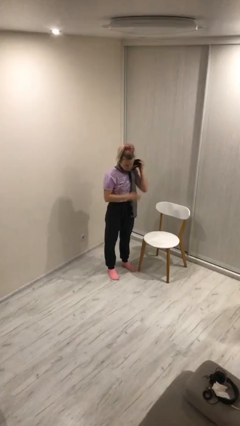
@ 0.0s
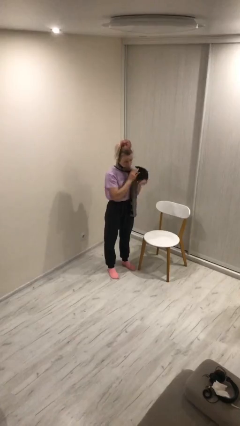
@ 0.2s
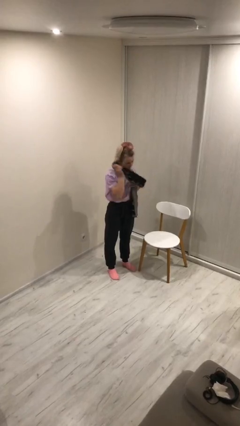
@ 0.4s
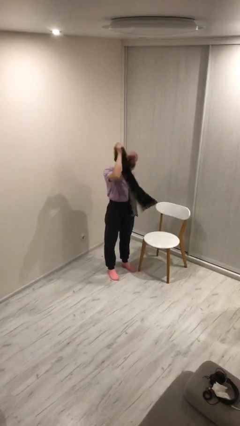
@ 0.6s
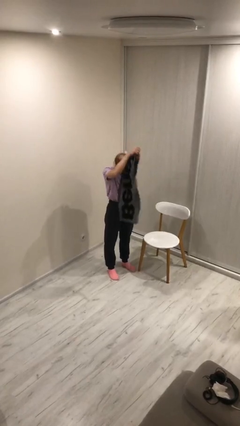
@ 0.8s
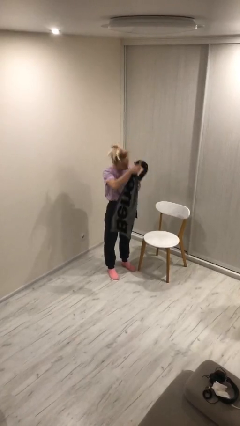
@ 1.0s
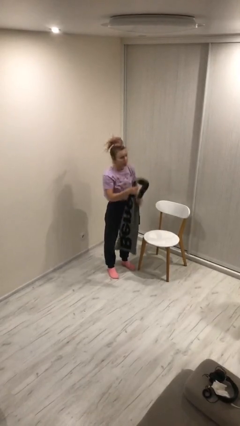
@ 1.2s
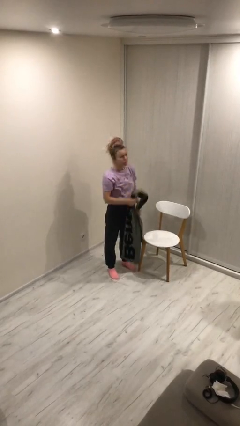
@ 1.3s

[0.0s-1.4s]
person takes off scarf

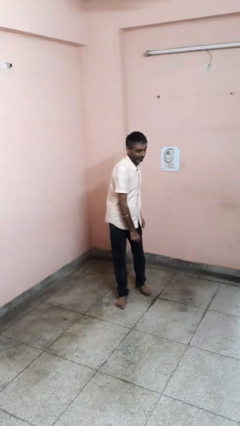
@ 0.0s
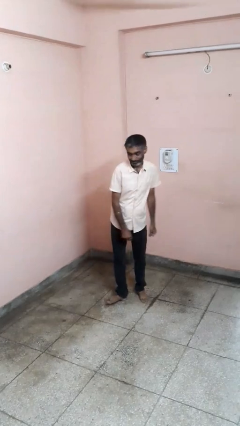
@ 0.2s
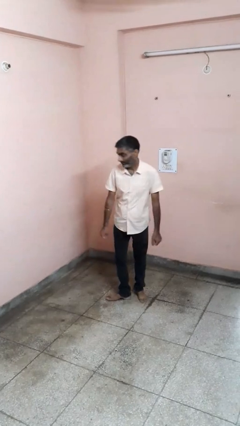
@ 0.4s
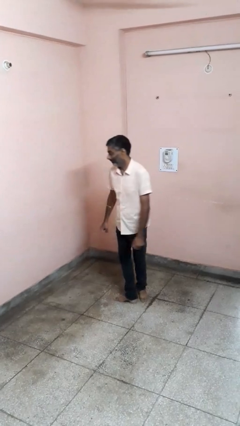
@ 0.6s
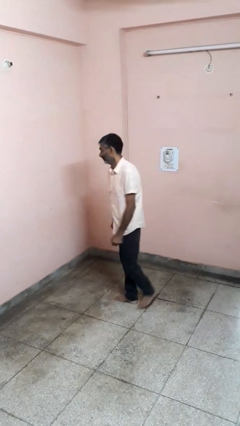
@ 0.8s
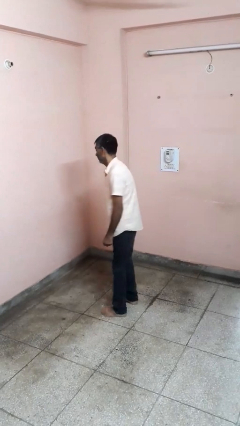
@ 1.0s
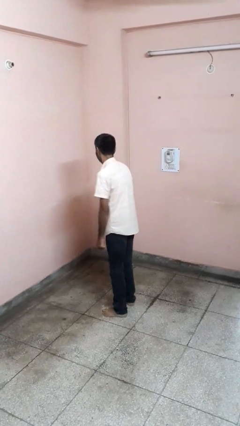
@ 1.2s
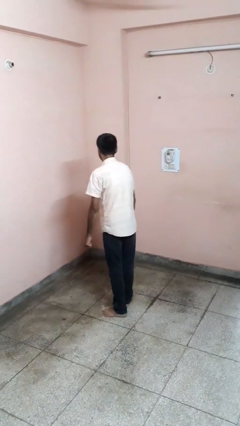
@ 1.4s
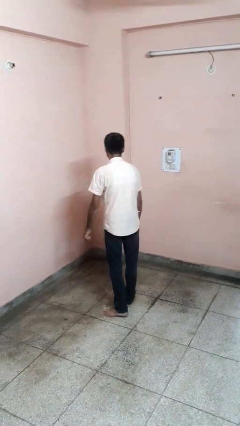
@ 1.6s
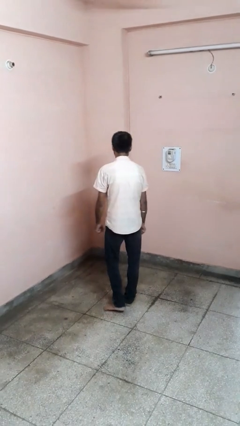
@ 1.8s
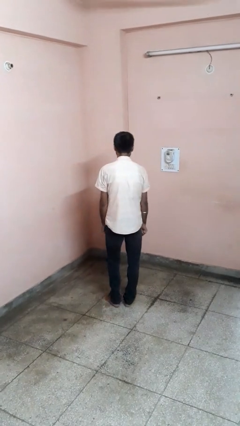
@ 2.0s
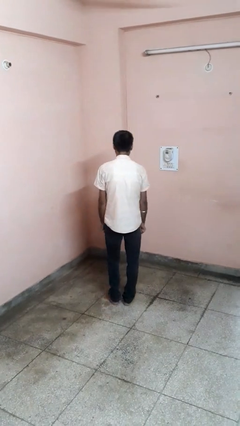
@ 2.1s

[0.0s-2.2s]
person twirls

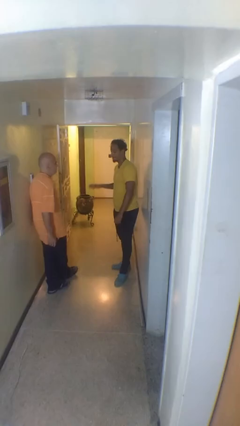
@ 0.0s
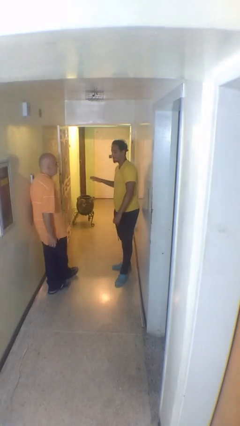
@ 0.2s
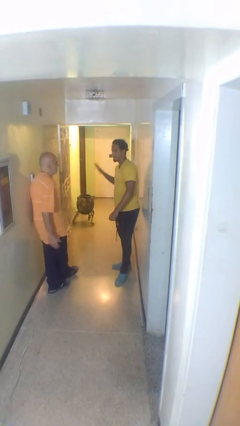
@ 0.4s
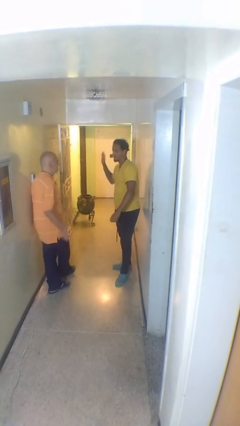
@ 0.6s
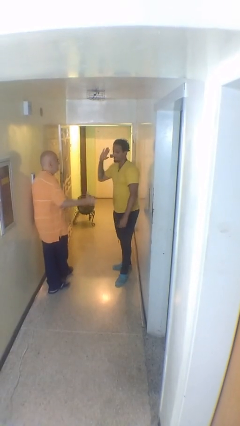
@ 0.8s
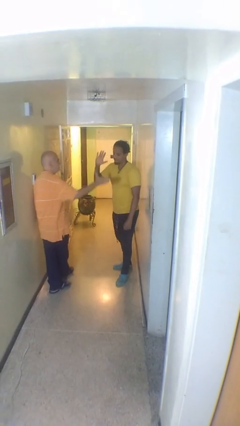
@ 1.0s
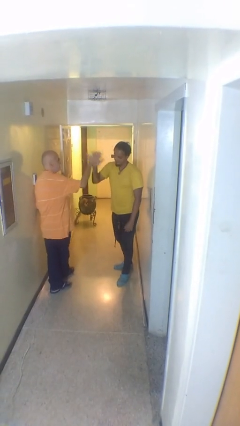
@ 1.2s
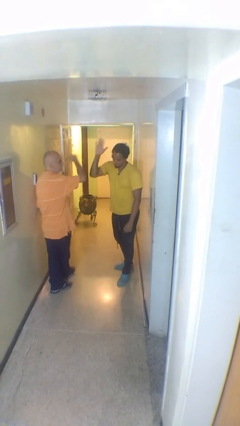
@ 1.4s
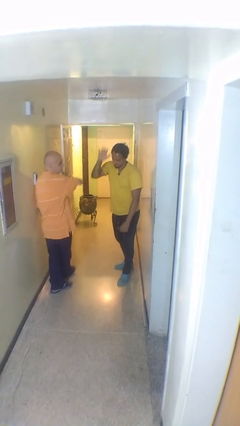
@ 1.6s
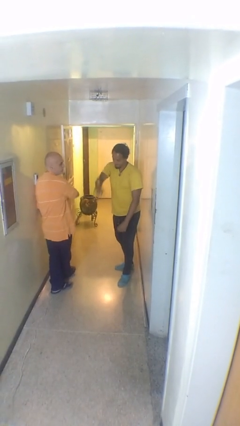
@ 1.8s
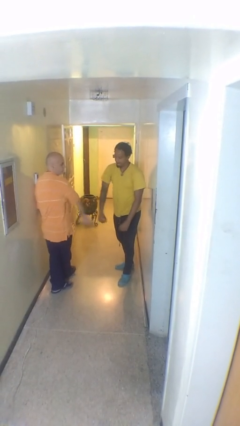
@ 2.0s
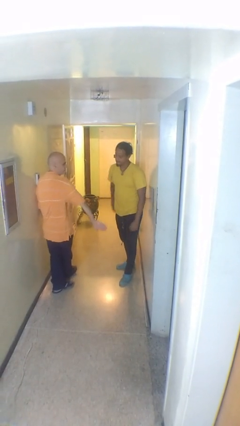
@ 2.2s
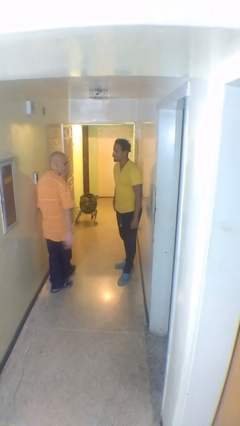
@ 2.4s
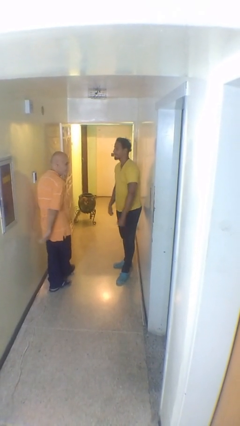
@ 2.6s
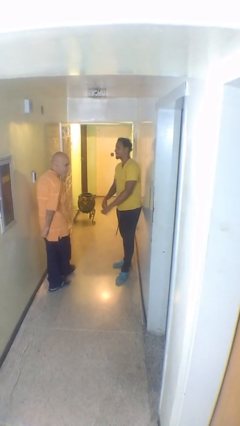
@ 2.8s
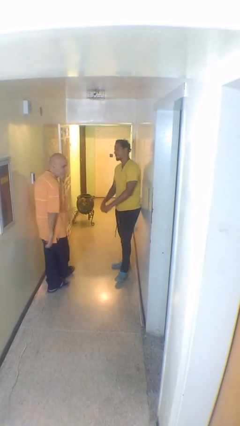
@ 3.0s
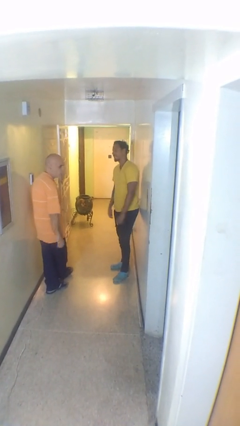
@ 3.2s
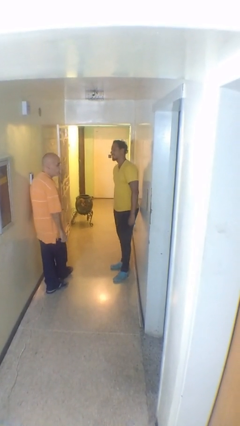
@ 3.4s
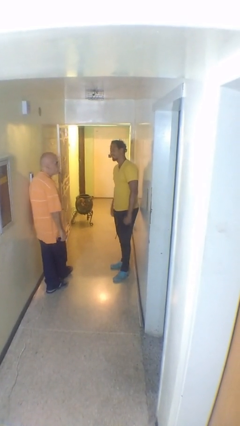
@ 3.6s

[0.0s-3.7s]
person highfives hand

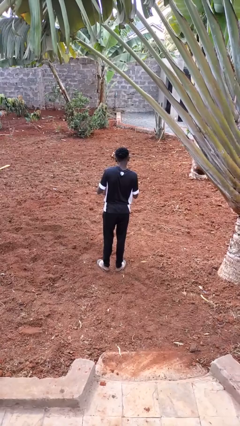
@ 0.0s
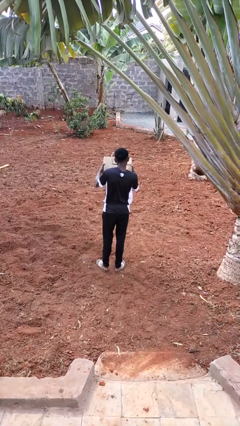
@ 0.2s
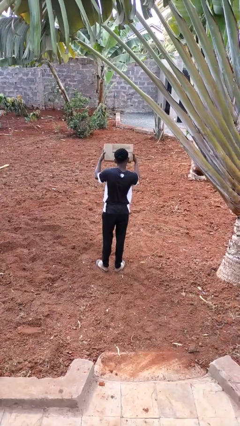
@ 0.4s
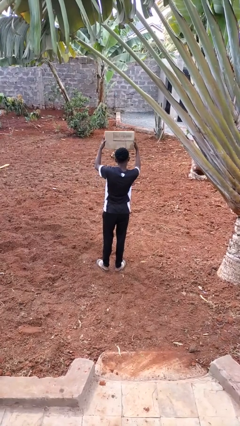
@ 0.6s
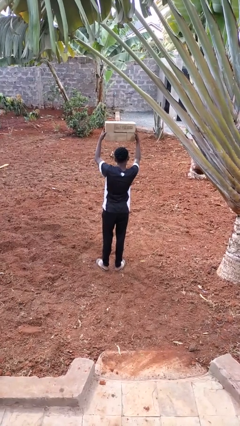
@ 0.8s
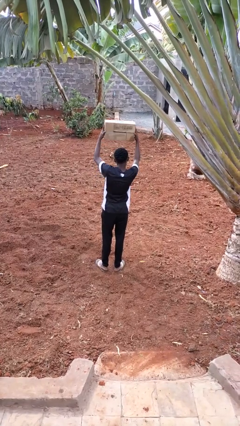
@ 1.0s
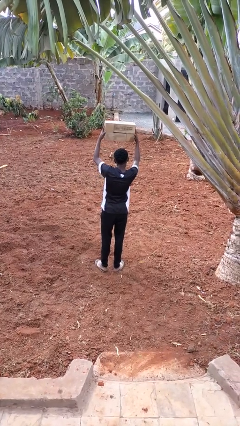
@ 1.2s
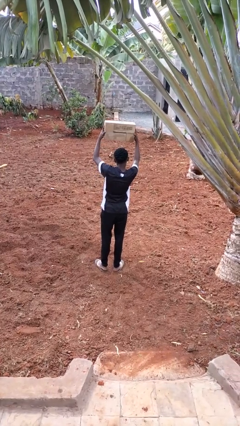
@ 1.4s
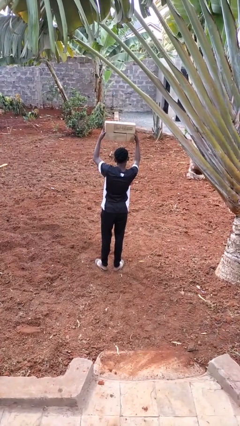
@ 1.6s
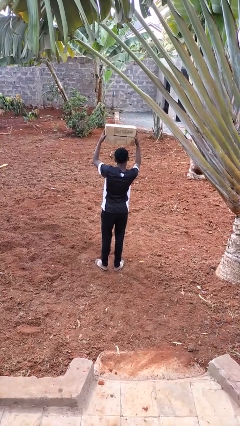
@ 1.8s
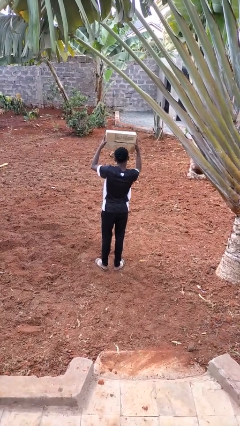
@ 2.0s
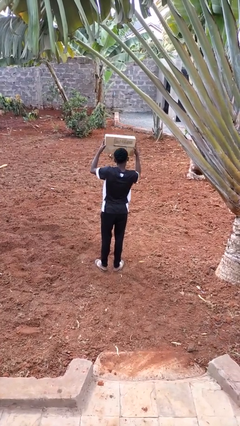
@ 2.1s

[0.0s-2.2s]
person holds object above head

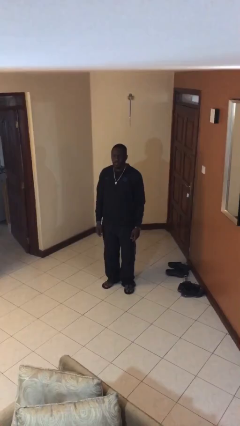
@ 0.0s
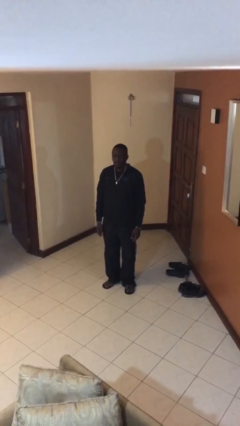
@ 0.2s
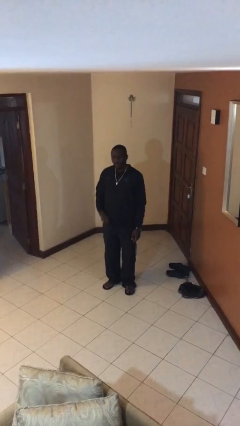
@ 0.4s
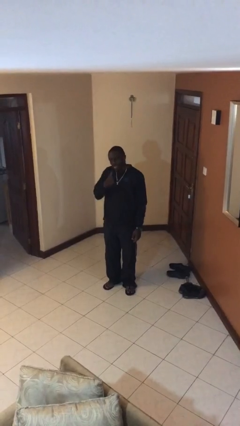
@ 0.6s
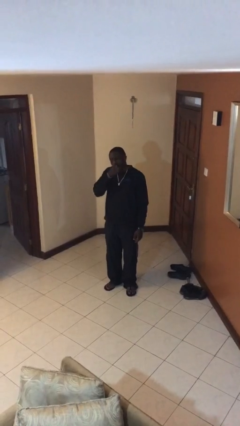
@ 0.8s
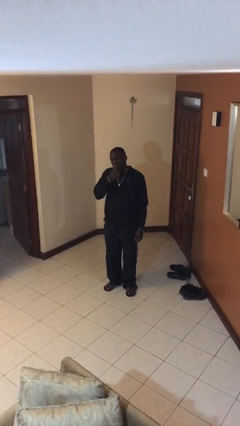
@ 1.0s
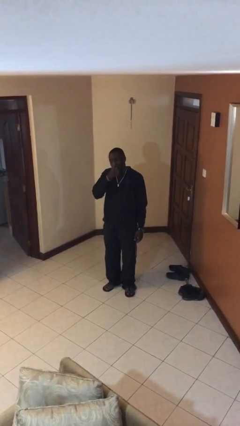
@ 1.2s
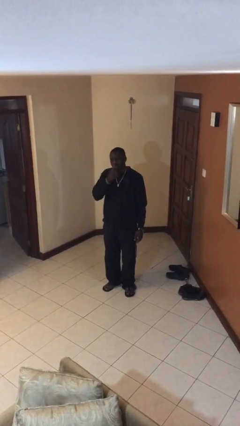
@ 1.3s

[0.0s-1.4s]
person licks fingers

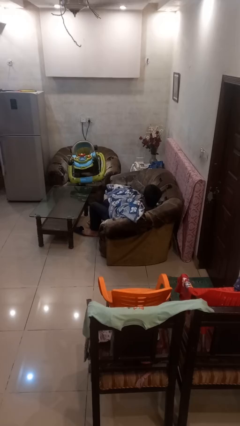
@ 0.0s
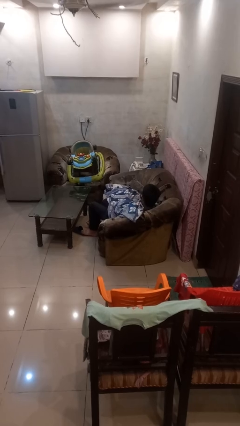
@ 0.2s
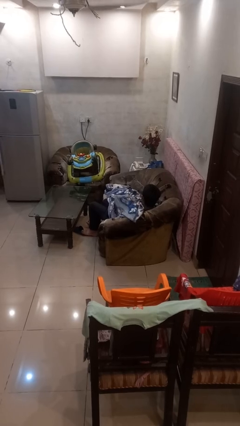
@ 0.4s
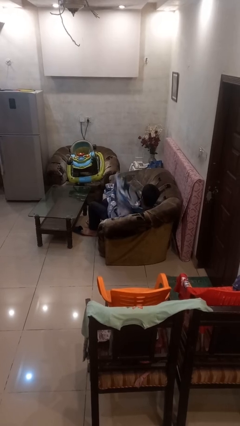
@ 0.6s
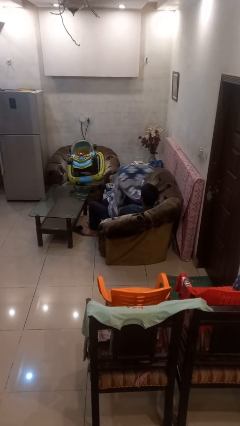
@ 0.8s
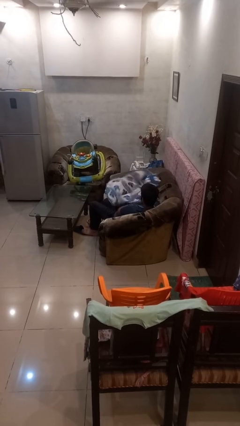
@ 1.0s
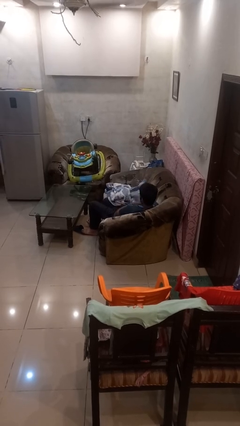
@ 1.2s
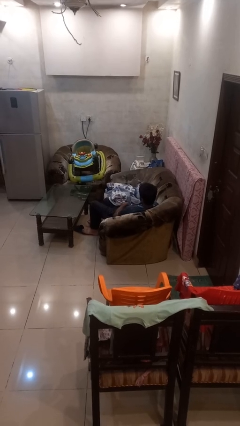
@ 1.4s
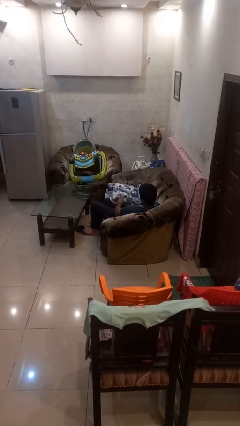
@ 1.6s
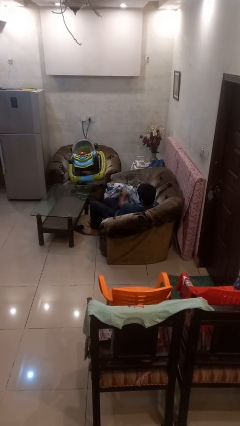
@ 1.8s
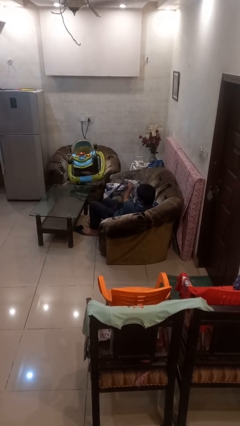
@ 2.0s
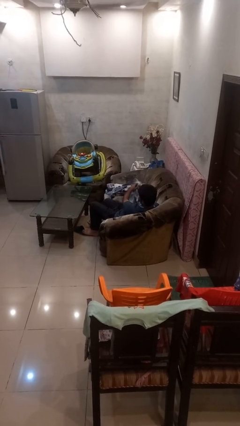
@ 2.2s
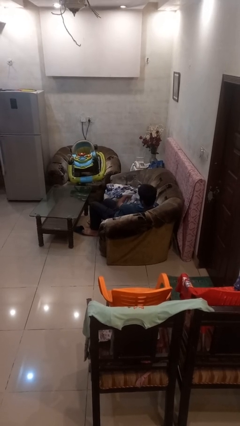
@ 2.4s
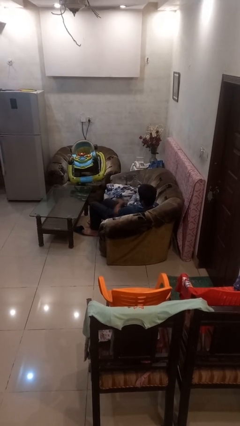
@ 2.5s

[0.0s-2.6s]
person uncovers with blanket

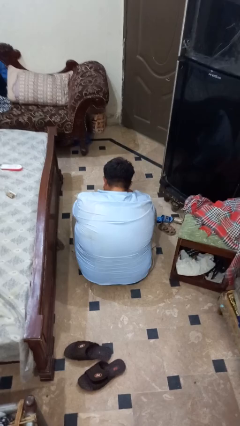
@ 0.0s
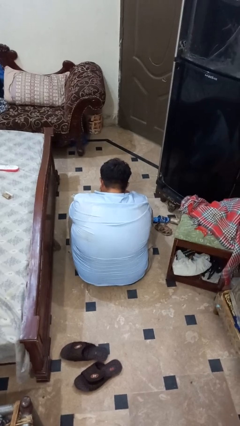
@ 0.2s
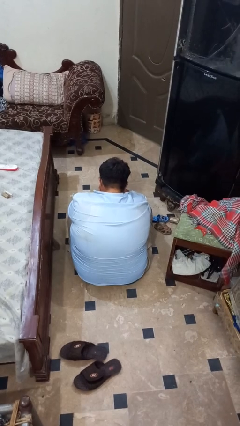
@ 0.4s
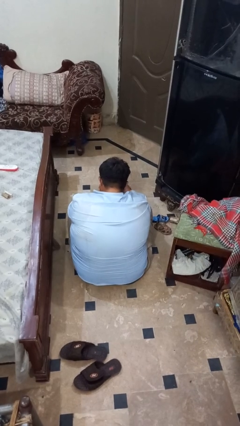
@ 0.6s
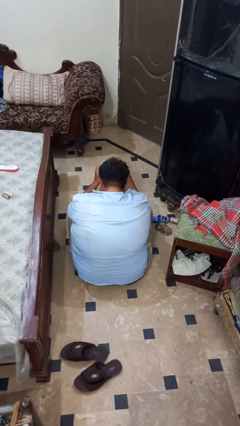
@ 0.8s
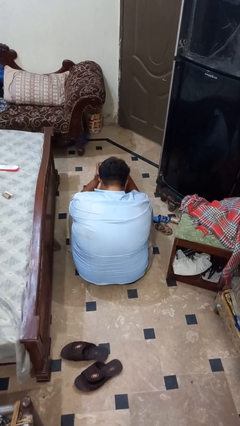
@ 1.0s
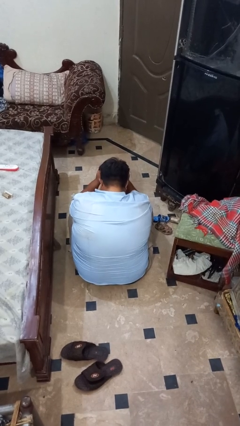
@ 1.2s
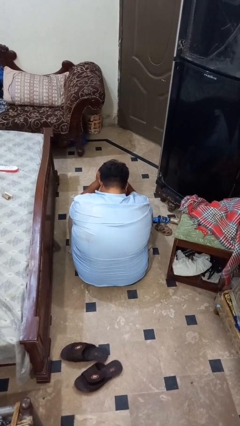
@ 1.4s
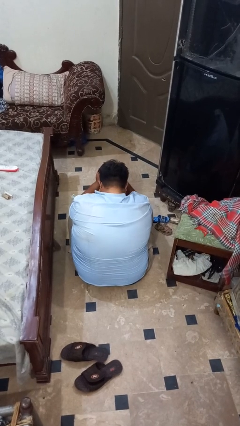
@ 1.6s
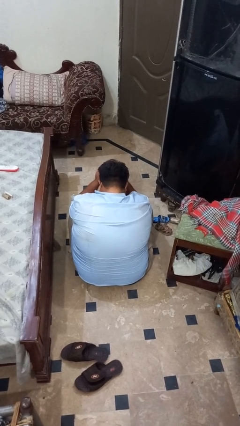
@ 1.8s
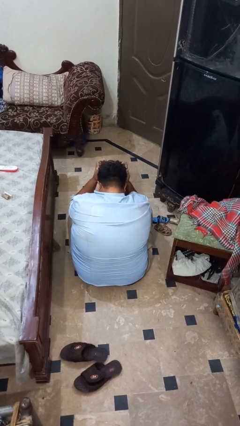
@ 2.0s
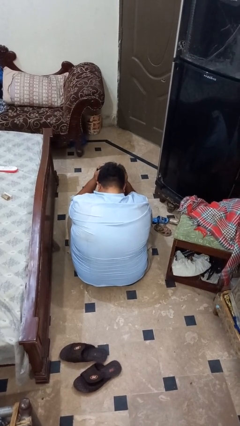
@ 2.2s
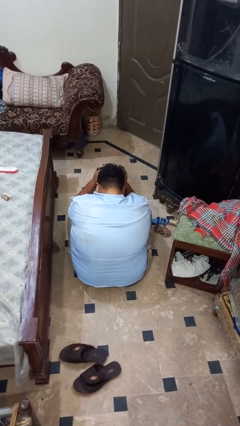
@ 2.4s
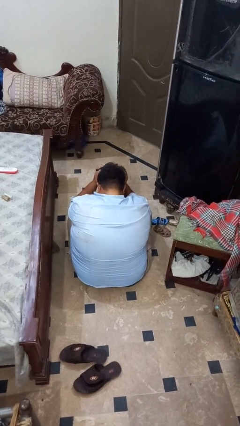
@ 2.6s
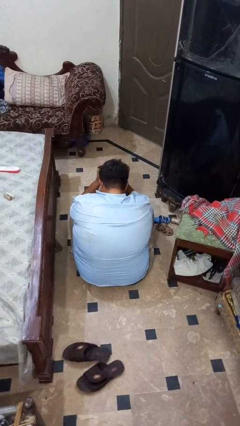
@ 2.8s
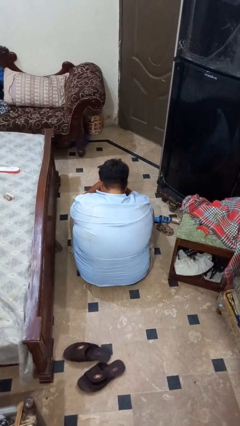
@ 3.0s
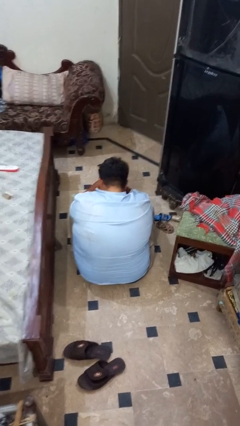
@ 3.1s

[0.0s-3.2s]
person strokes hair

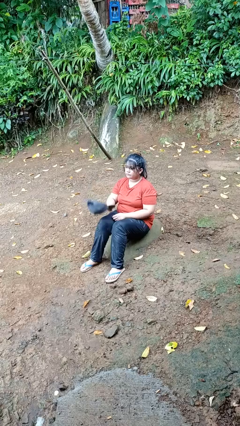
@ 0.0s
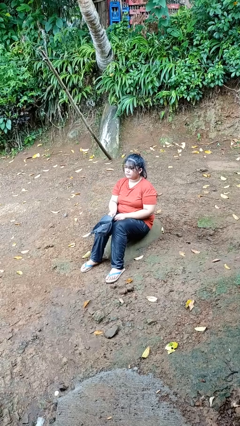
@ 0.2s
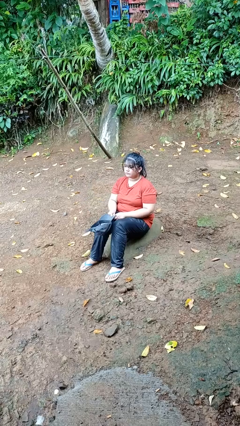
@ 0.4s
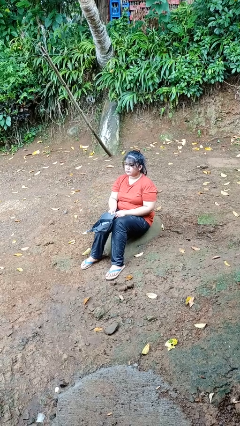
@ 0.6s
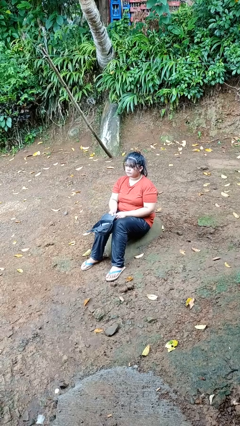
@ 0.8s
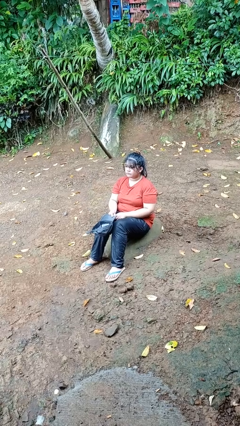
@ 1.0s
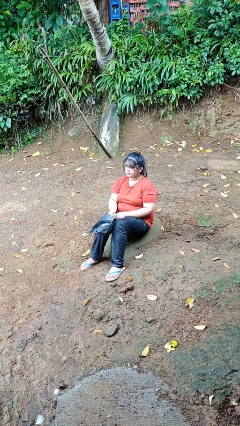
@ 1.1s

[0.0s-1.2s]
person takes off hat
